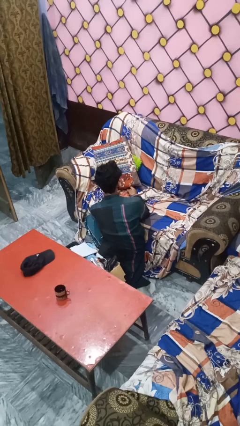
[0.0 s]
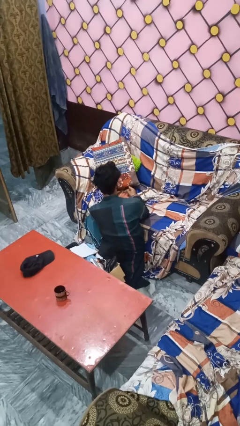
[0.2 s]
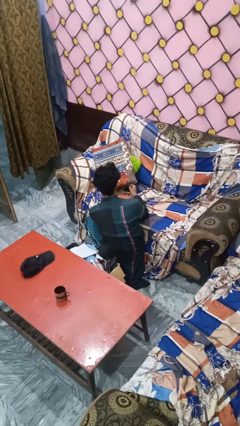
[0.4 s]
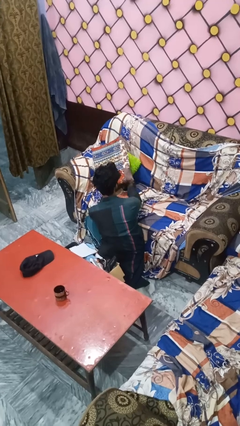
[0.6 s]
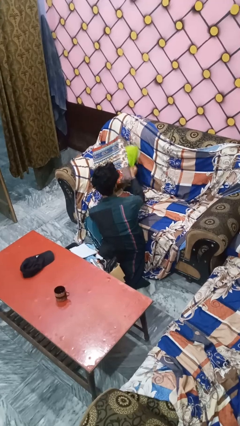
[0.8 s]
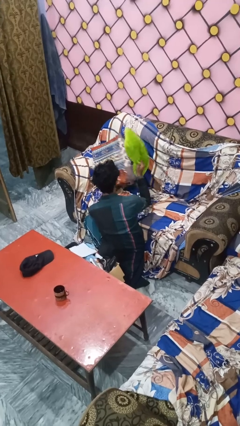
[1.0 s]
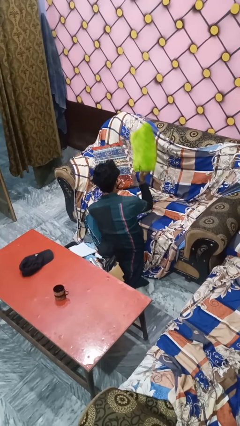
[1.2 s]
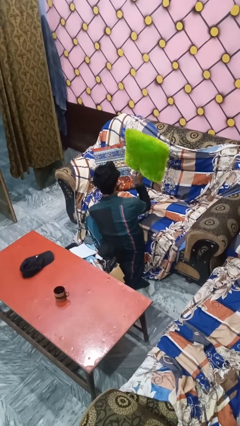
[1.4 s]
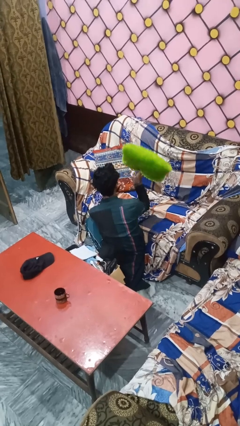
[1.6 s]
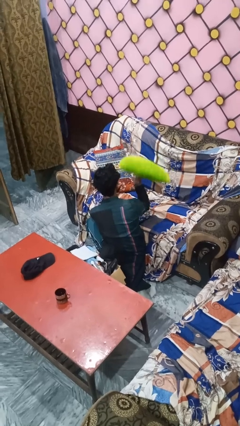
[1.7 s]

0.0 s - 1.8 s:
person searches in couch

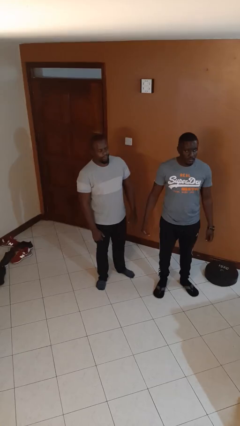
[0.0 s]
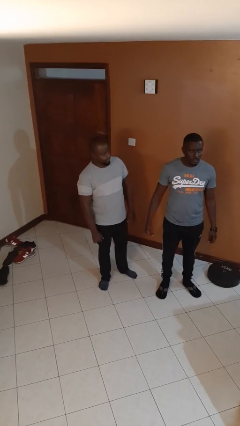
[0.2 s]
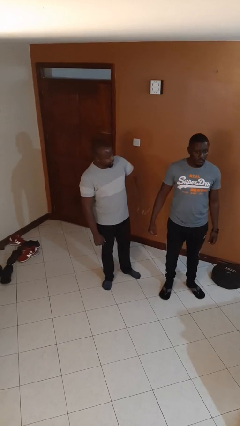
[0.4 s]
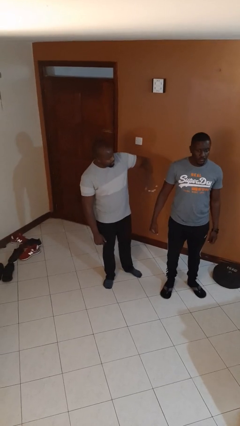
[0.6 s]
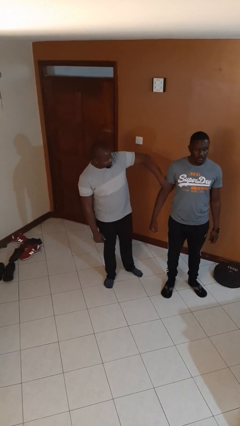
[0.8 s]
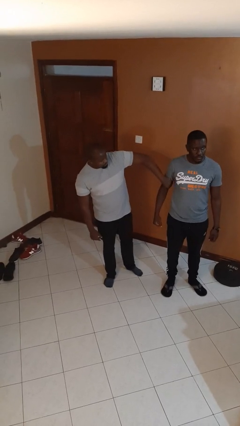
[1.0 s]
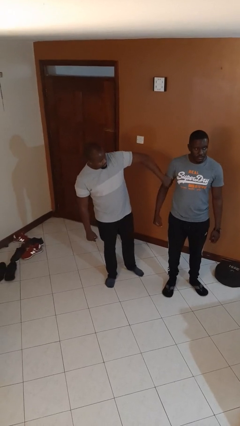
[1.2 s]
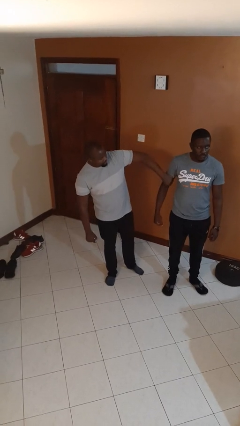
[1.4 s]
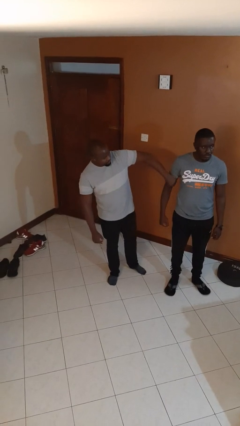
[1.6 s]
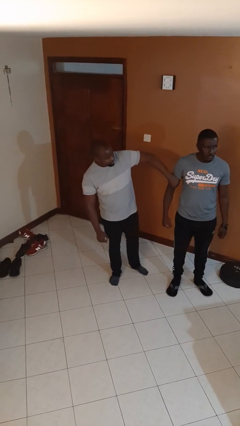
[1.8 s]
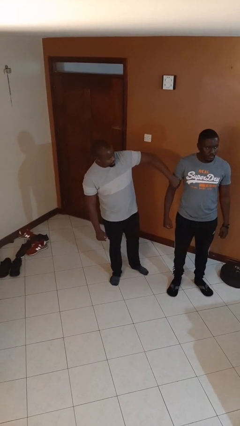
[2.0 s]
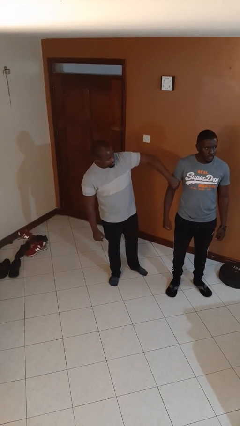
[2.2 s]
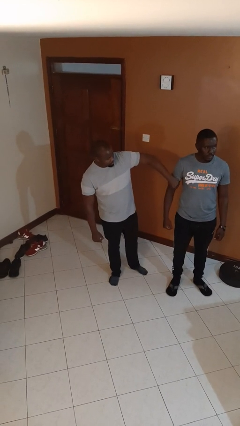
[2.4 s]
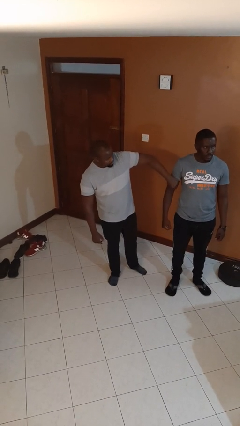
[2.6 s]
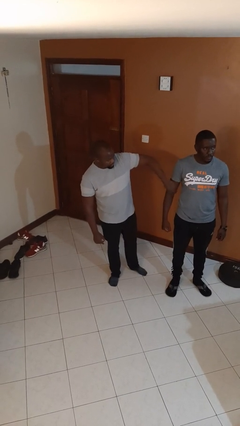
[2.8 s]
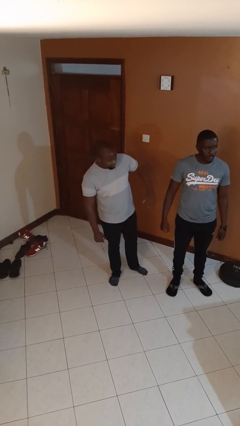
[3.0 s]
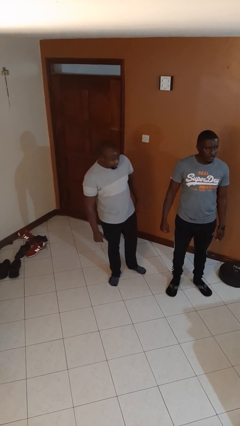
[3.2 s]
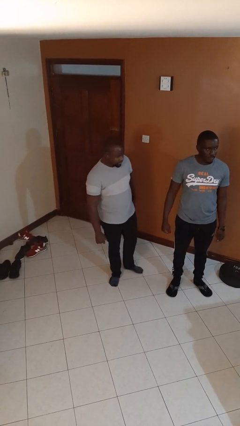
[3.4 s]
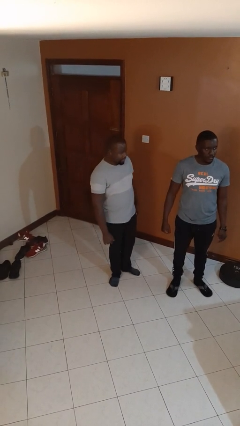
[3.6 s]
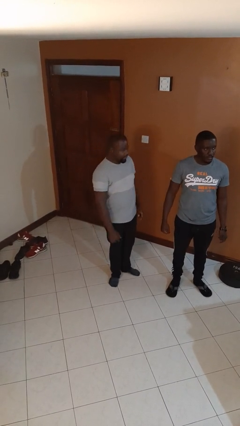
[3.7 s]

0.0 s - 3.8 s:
person grabs person by bicep

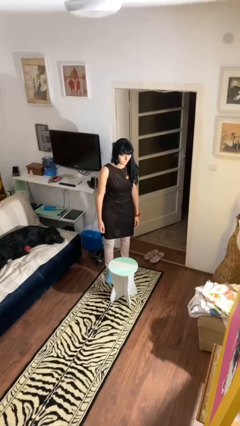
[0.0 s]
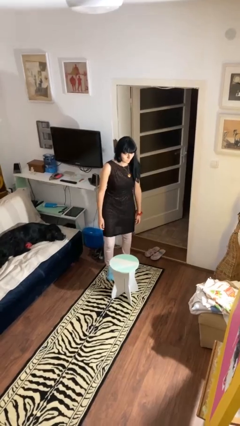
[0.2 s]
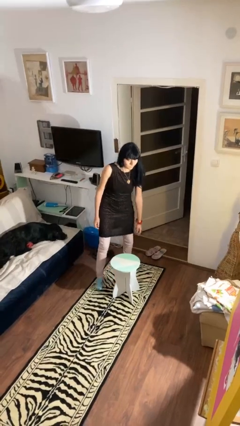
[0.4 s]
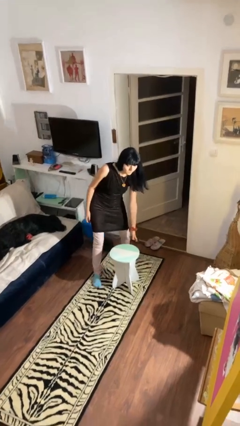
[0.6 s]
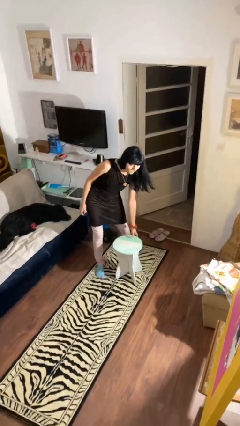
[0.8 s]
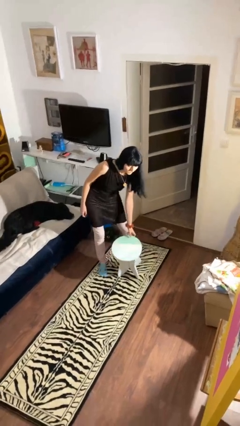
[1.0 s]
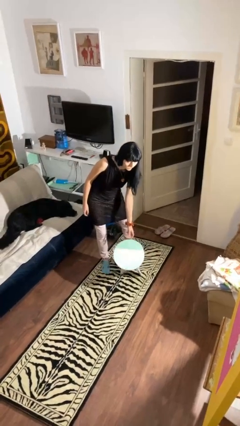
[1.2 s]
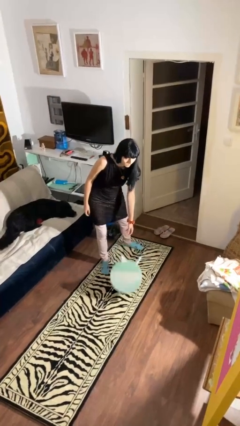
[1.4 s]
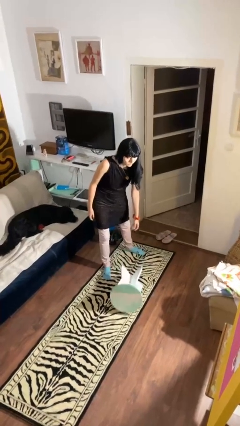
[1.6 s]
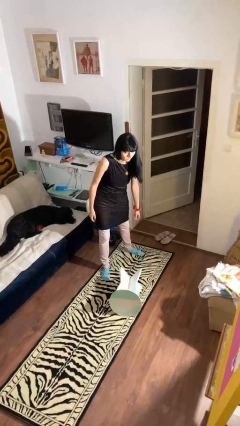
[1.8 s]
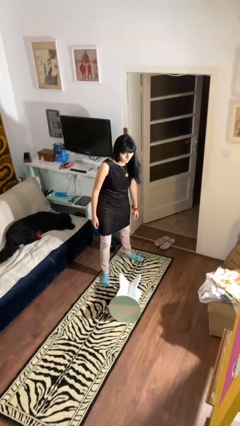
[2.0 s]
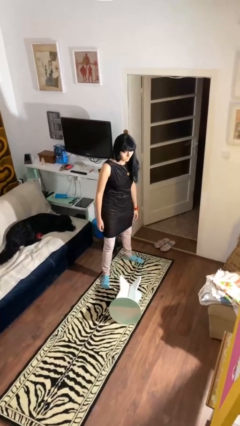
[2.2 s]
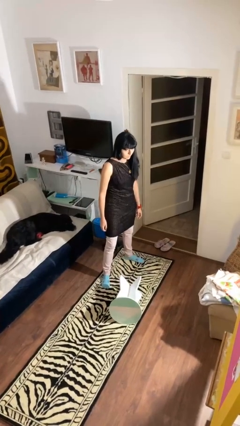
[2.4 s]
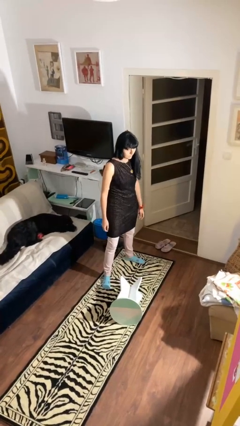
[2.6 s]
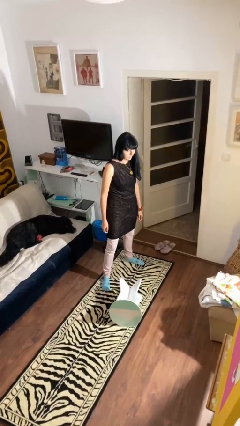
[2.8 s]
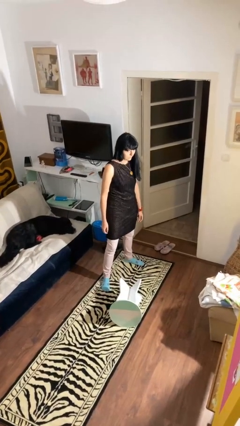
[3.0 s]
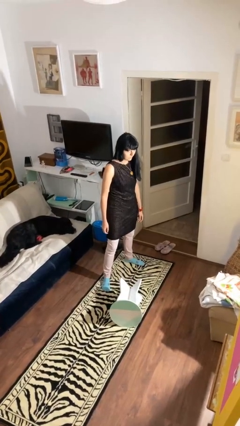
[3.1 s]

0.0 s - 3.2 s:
person knocks over furniture

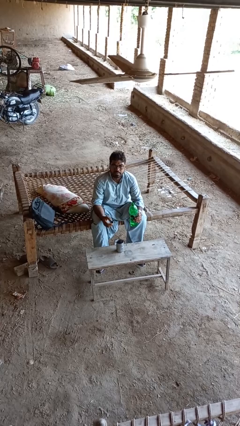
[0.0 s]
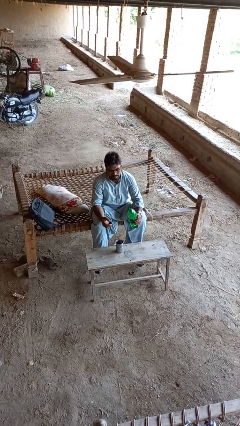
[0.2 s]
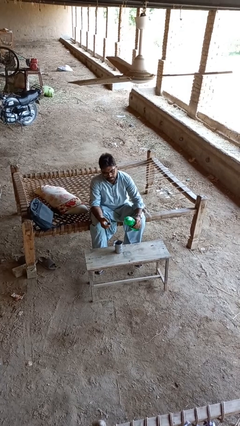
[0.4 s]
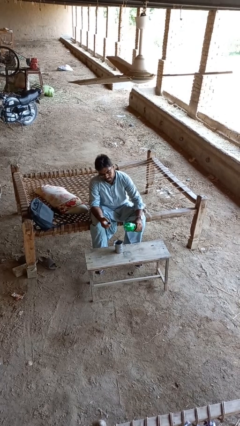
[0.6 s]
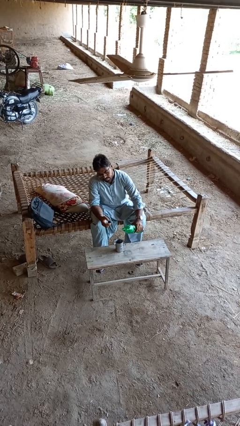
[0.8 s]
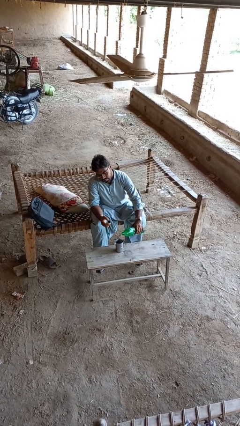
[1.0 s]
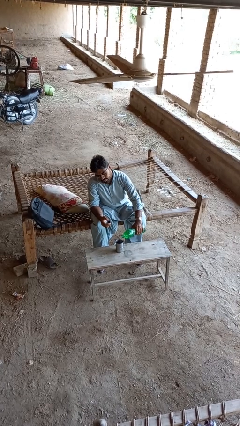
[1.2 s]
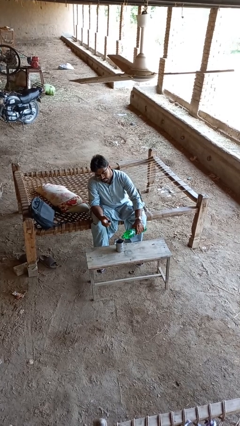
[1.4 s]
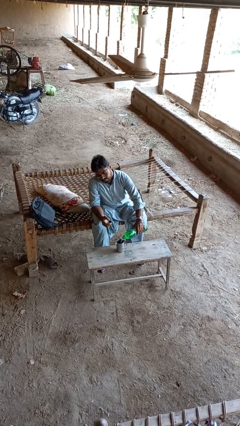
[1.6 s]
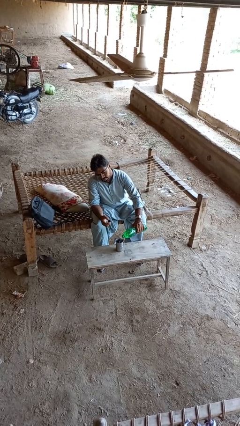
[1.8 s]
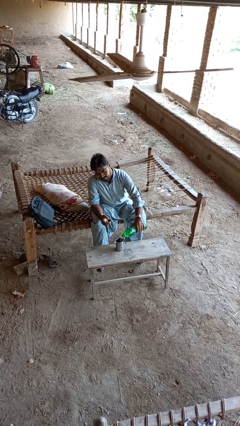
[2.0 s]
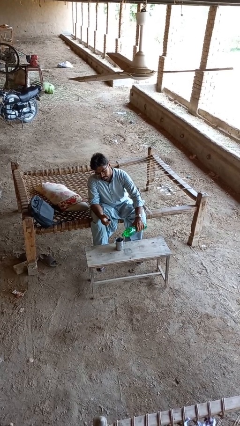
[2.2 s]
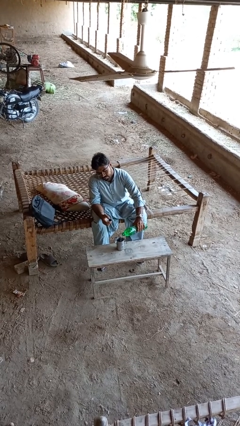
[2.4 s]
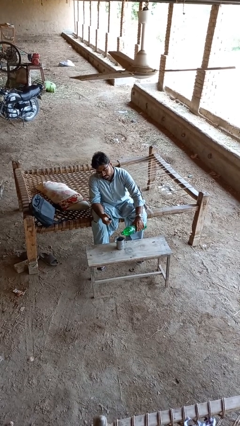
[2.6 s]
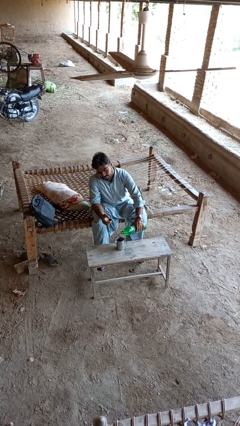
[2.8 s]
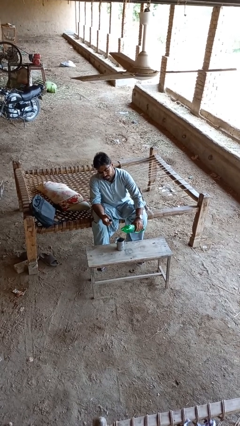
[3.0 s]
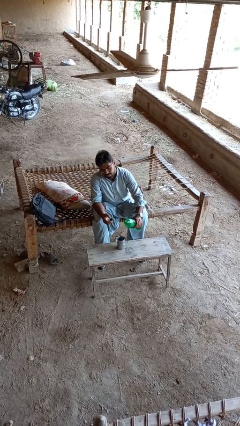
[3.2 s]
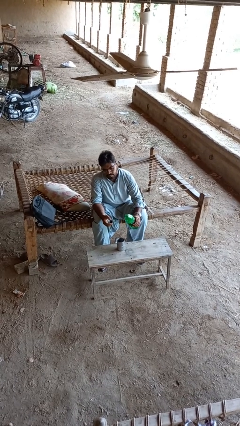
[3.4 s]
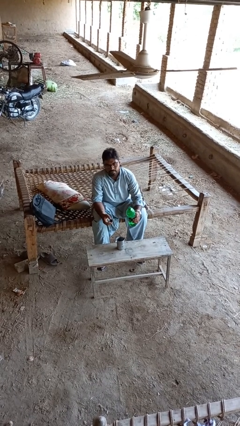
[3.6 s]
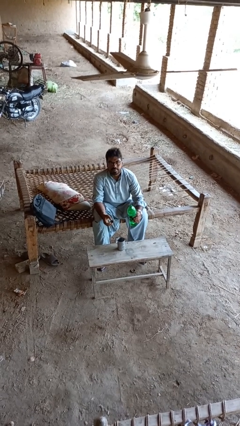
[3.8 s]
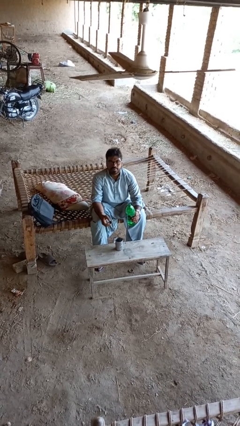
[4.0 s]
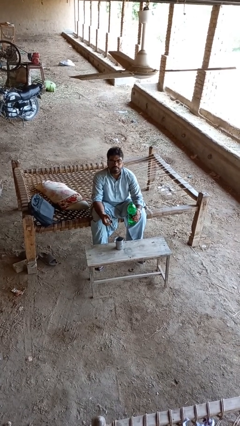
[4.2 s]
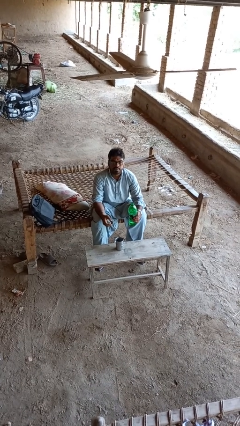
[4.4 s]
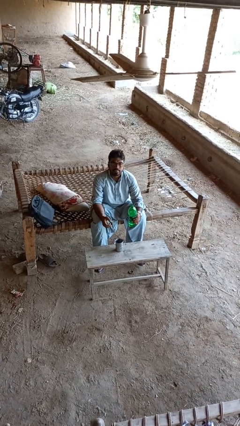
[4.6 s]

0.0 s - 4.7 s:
person pours liquid into cup

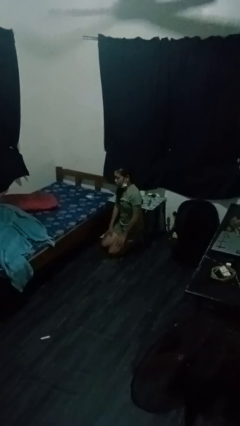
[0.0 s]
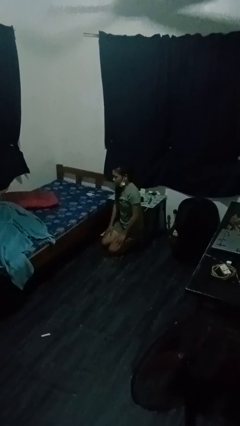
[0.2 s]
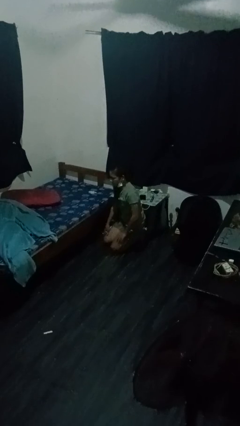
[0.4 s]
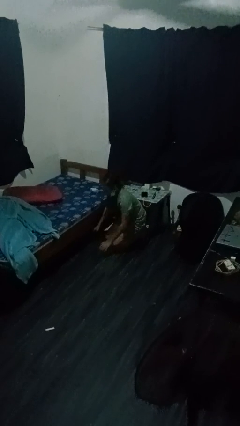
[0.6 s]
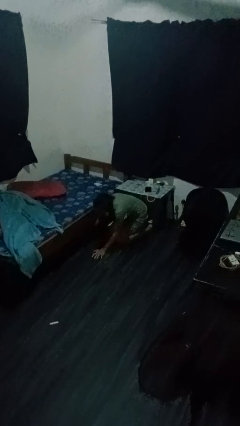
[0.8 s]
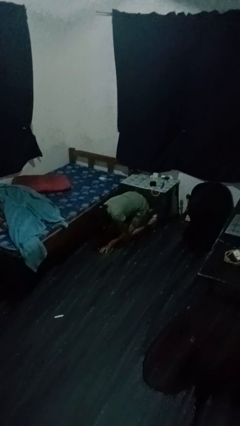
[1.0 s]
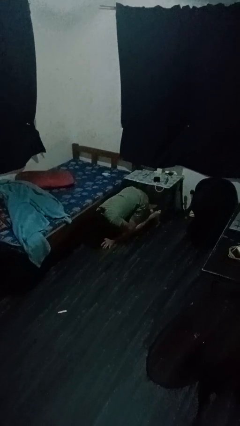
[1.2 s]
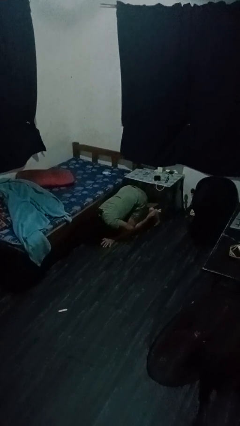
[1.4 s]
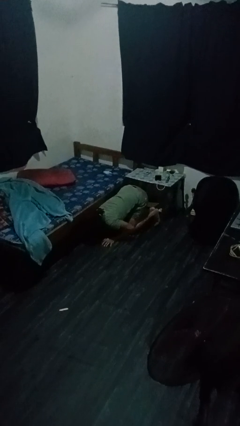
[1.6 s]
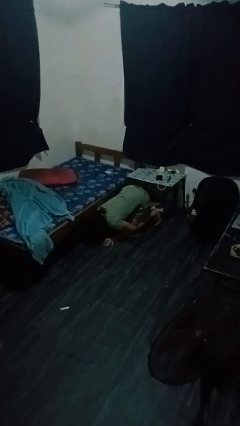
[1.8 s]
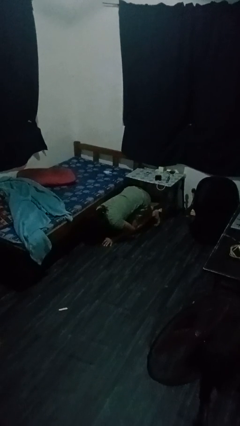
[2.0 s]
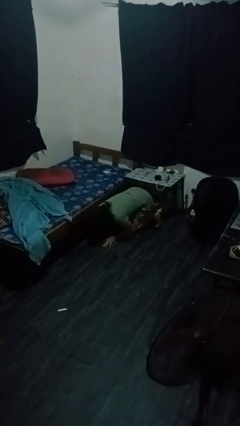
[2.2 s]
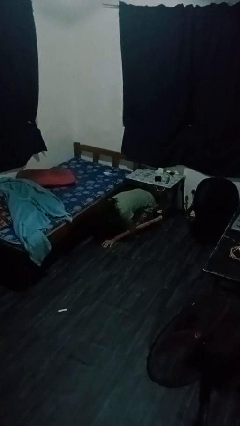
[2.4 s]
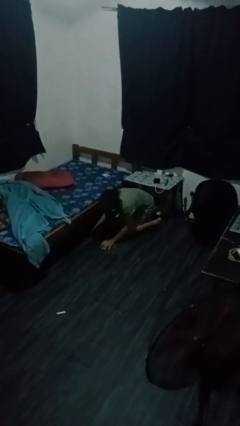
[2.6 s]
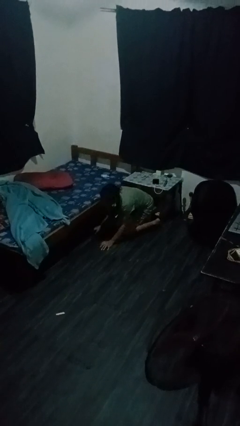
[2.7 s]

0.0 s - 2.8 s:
person searches under bed

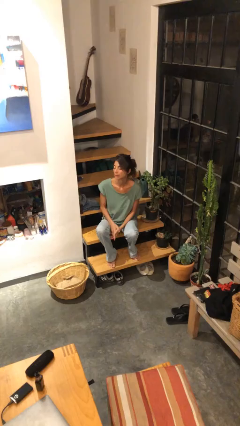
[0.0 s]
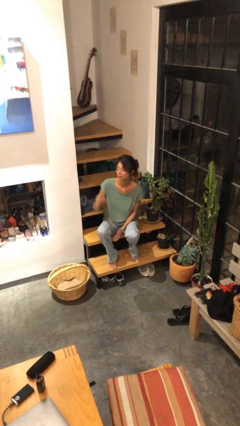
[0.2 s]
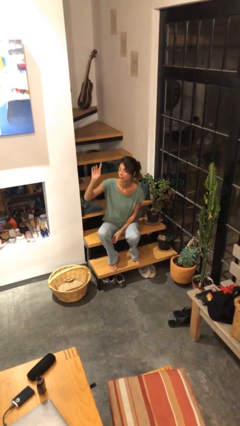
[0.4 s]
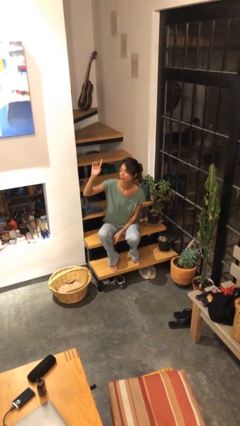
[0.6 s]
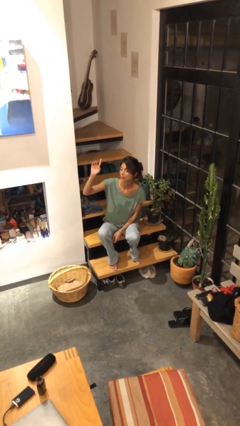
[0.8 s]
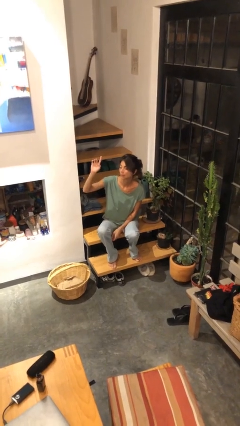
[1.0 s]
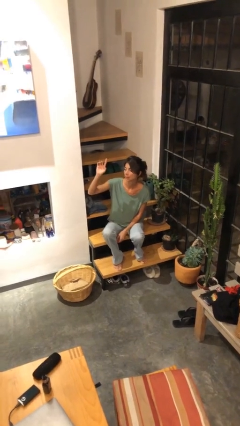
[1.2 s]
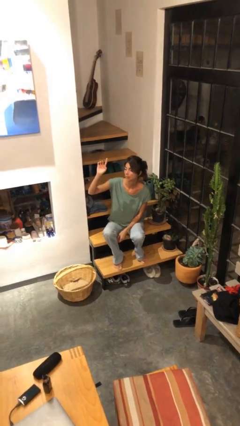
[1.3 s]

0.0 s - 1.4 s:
person gestures raise hand
